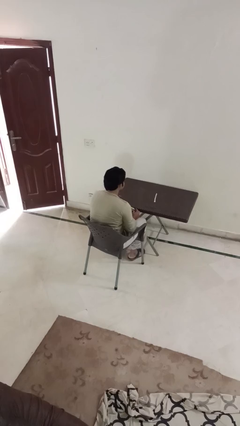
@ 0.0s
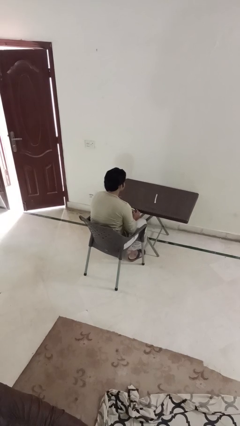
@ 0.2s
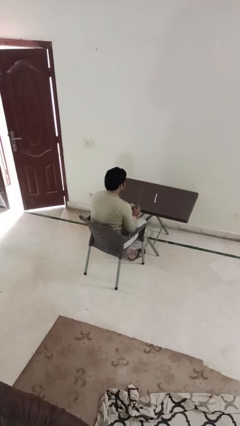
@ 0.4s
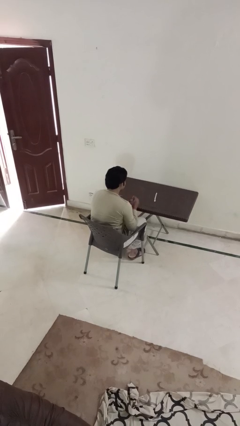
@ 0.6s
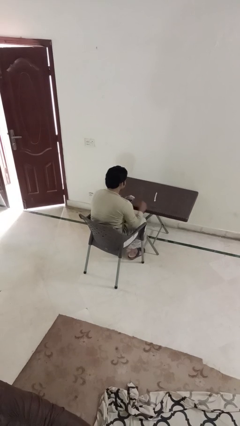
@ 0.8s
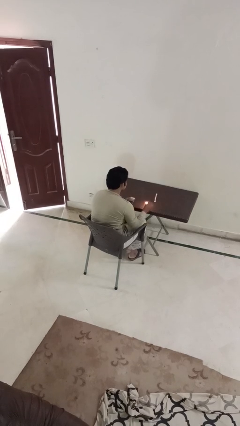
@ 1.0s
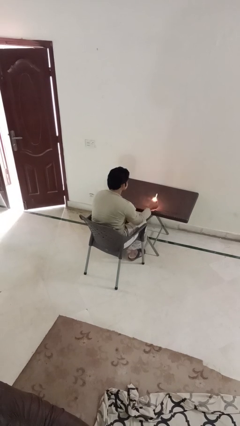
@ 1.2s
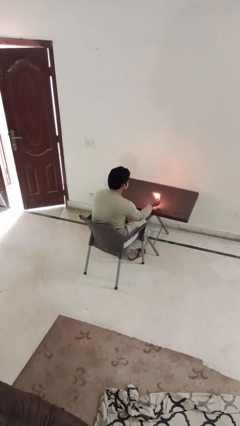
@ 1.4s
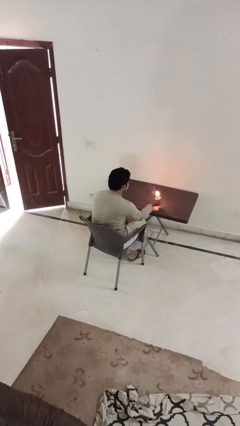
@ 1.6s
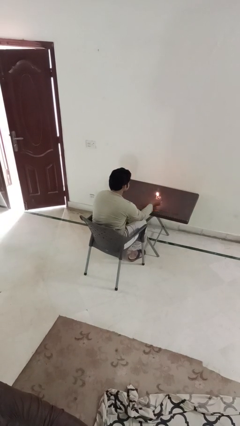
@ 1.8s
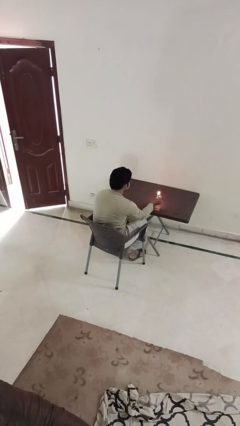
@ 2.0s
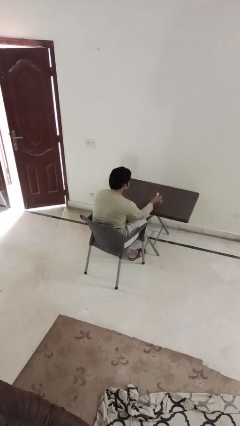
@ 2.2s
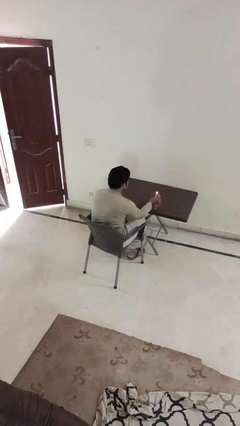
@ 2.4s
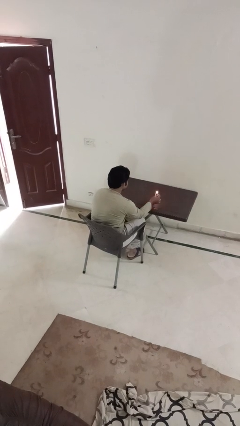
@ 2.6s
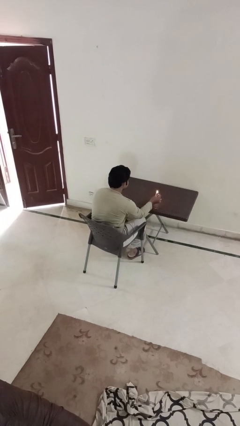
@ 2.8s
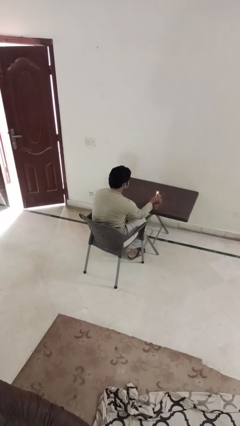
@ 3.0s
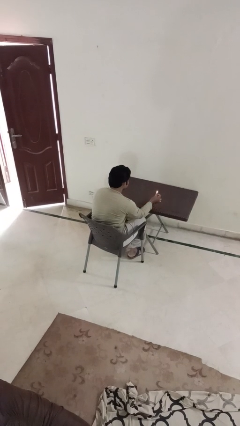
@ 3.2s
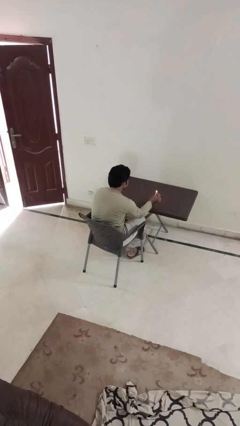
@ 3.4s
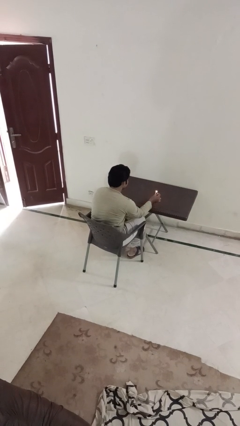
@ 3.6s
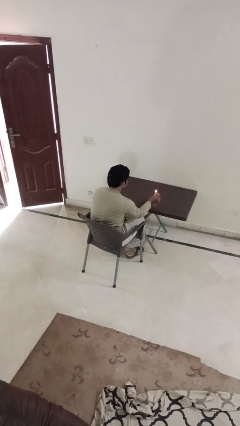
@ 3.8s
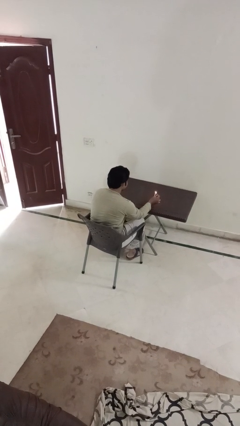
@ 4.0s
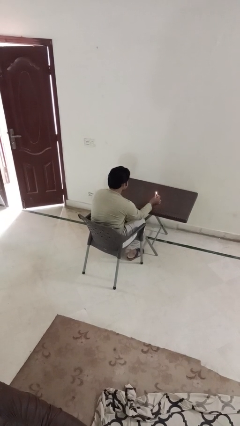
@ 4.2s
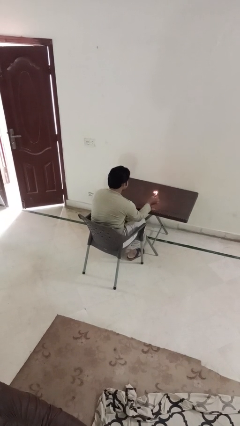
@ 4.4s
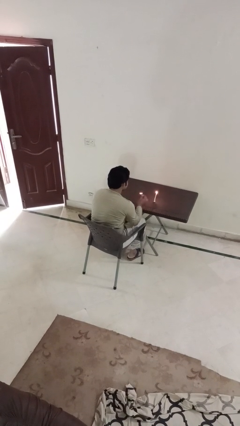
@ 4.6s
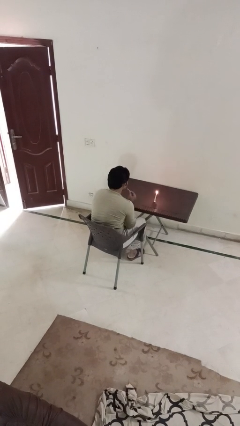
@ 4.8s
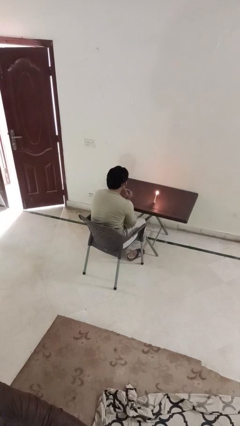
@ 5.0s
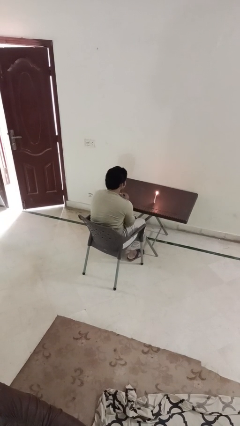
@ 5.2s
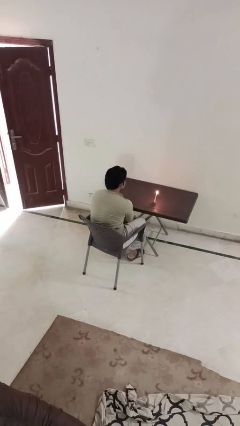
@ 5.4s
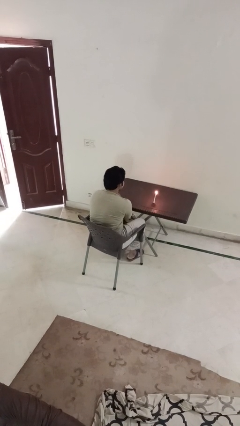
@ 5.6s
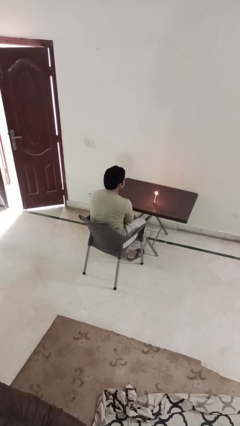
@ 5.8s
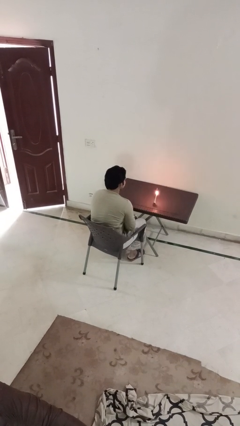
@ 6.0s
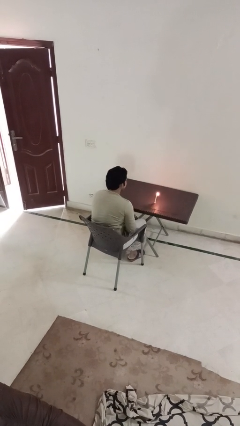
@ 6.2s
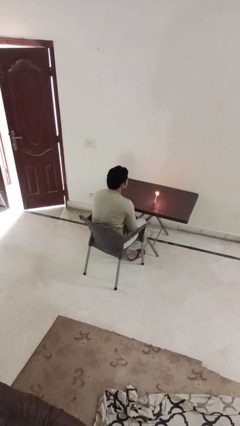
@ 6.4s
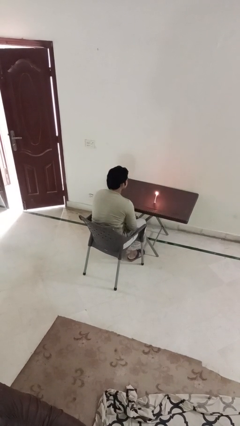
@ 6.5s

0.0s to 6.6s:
person lights candle

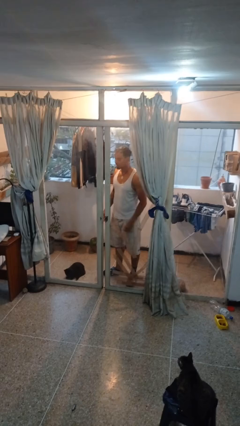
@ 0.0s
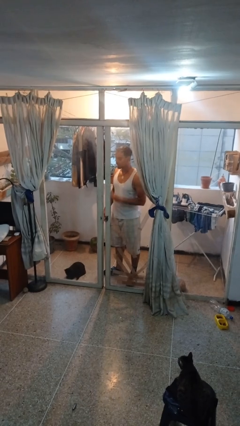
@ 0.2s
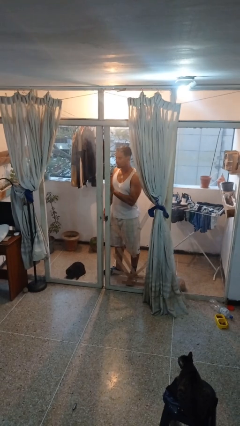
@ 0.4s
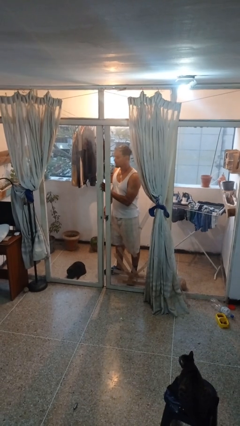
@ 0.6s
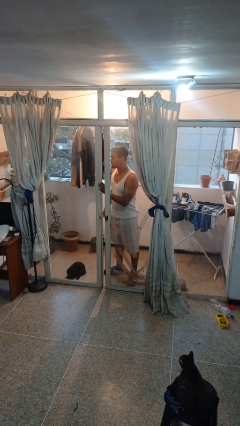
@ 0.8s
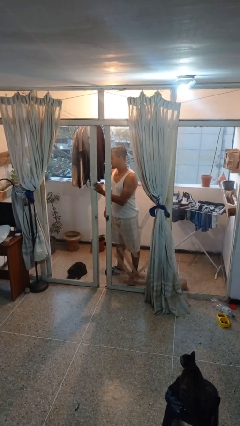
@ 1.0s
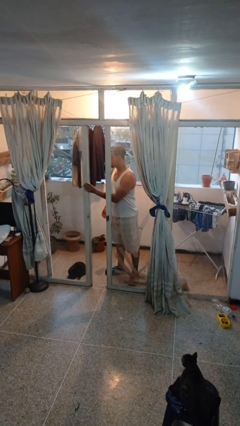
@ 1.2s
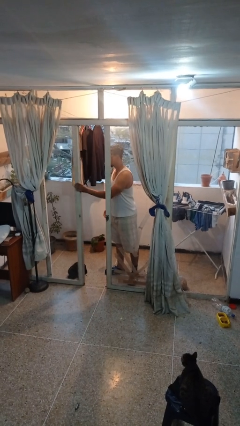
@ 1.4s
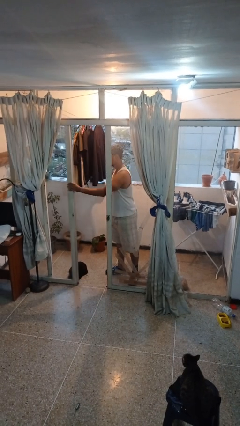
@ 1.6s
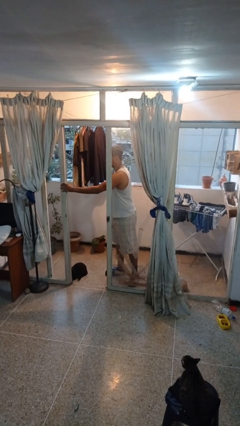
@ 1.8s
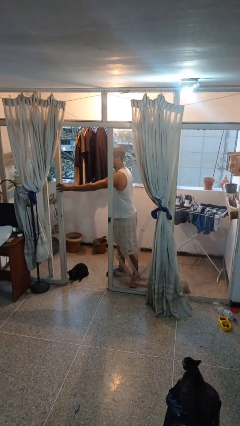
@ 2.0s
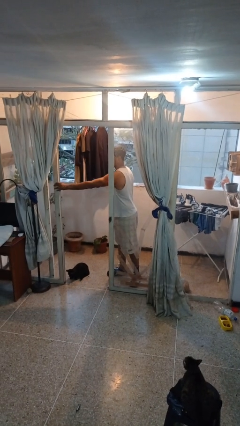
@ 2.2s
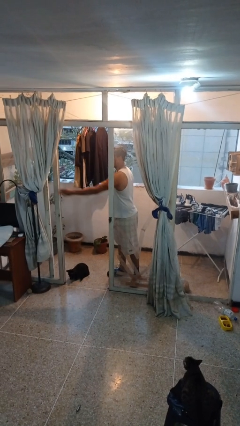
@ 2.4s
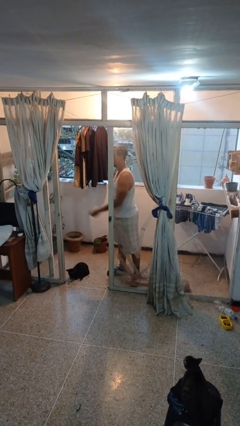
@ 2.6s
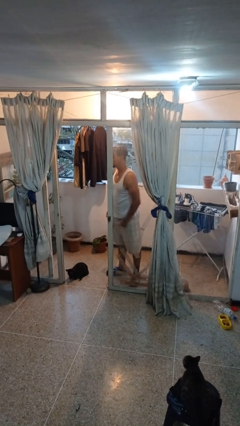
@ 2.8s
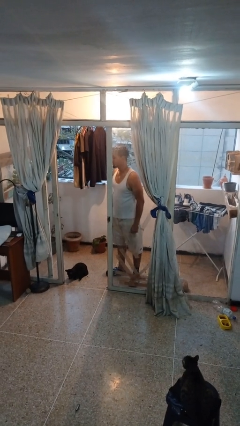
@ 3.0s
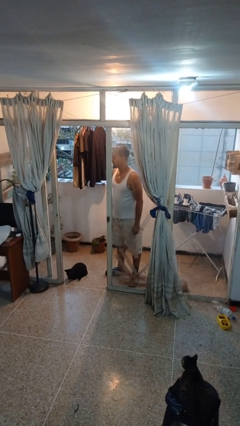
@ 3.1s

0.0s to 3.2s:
person opens sliding door

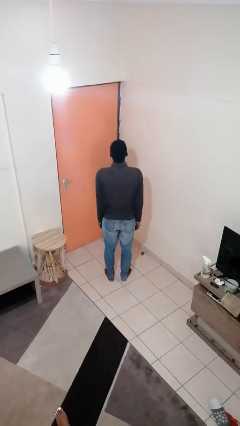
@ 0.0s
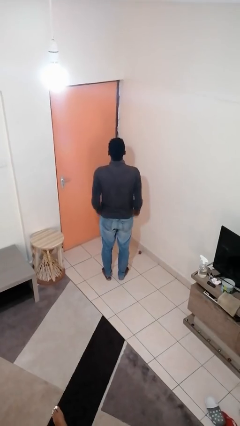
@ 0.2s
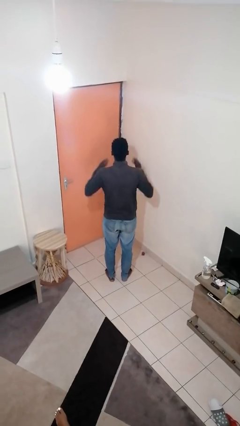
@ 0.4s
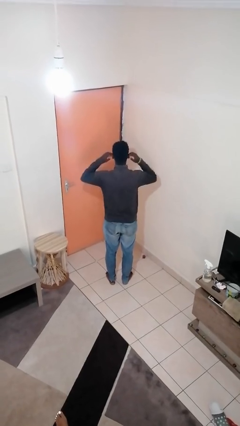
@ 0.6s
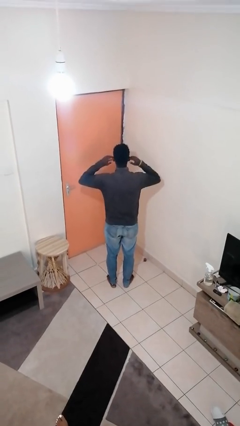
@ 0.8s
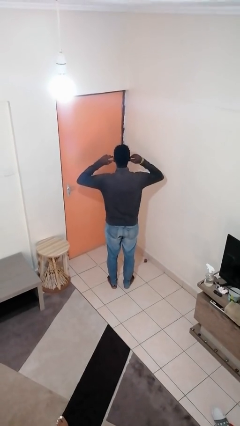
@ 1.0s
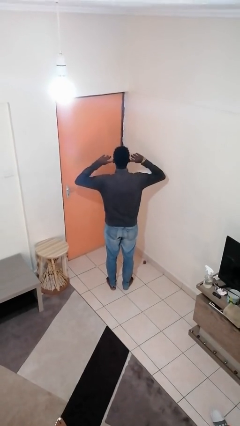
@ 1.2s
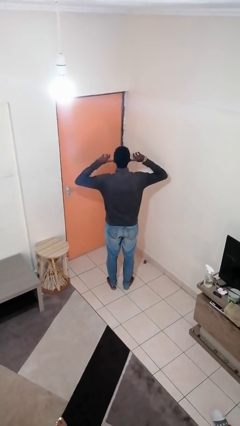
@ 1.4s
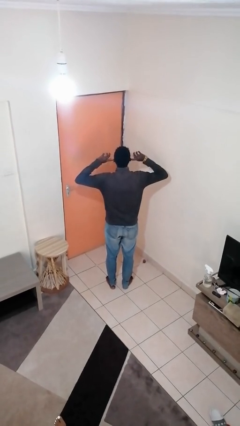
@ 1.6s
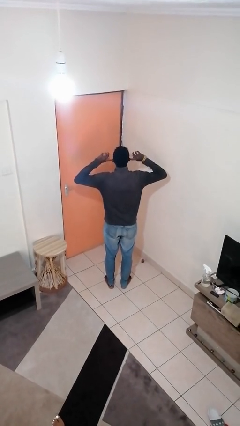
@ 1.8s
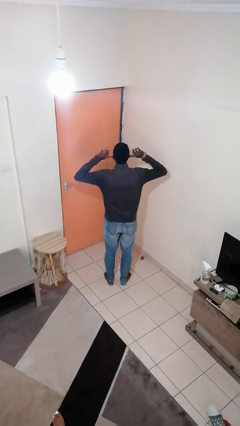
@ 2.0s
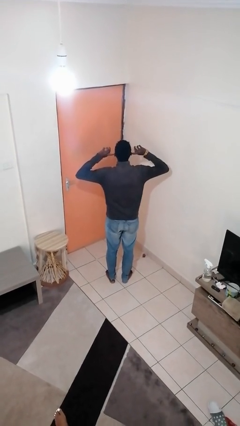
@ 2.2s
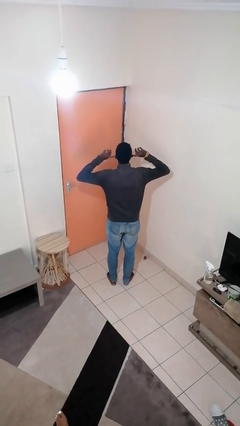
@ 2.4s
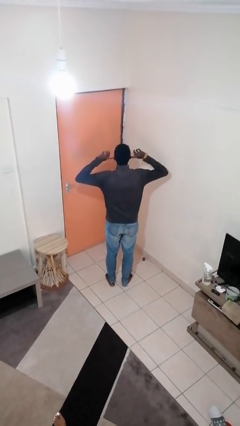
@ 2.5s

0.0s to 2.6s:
person puts fingers in ear

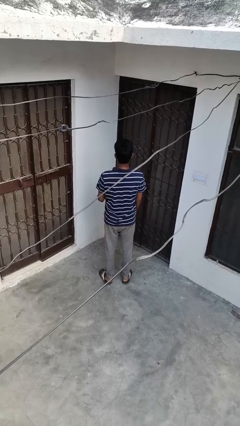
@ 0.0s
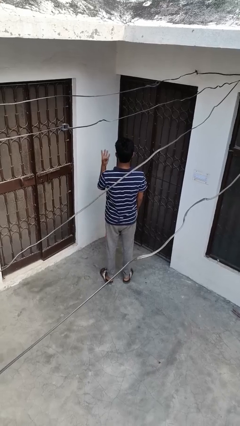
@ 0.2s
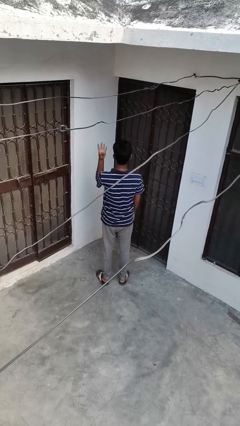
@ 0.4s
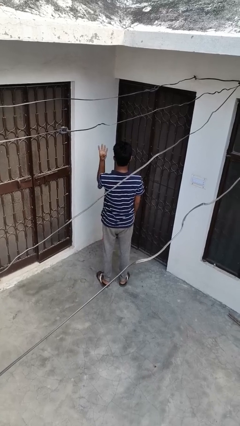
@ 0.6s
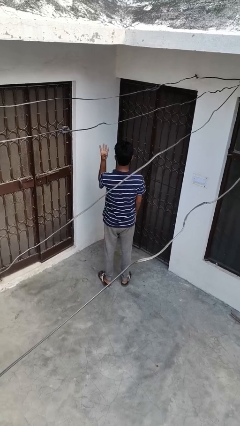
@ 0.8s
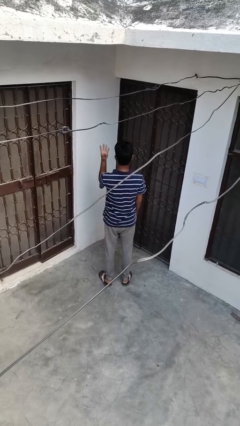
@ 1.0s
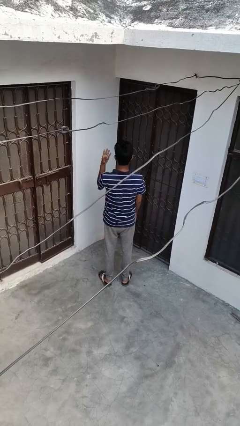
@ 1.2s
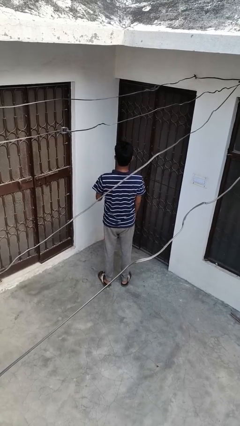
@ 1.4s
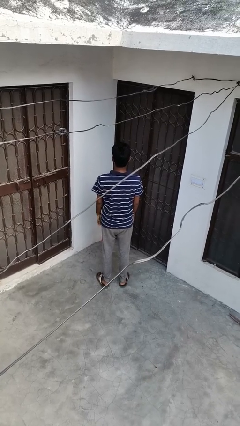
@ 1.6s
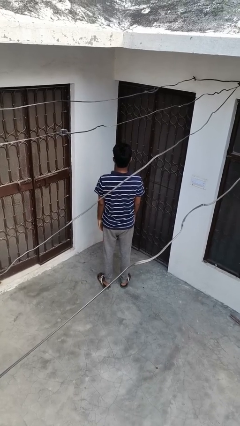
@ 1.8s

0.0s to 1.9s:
person gestures number four

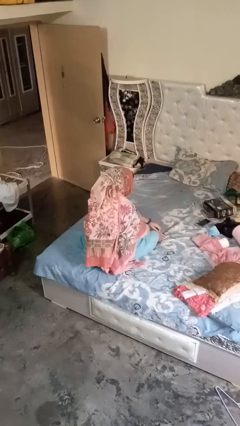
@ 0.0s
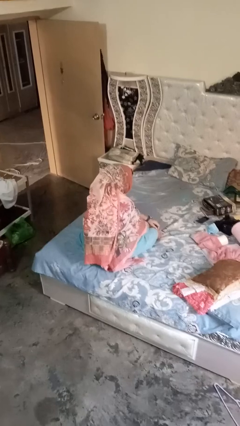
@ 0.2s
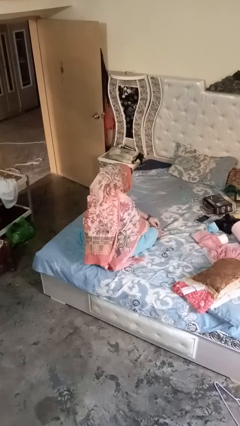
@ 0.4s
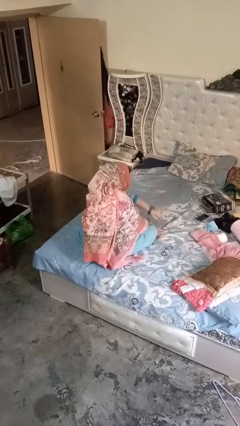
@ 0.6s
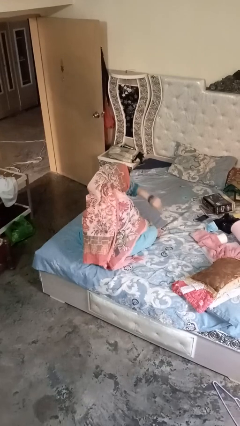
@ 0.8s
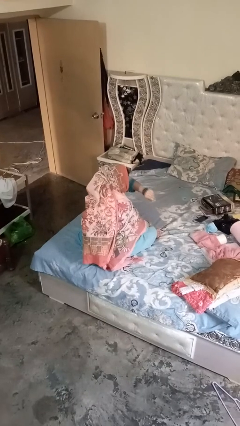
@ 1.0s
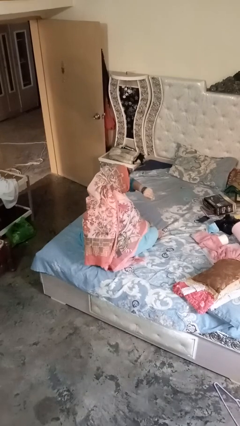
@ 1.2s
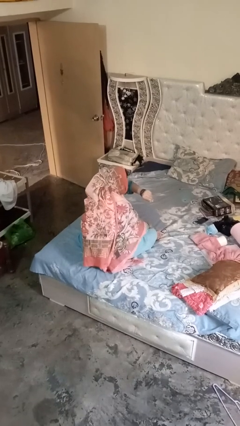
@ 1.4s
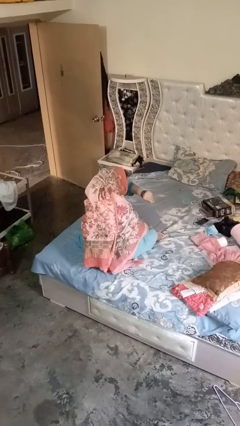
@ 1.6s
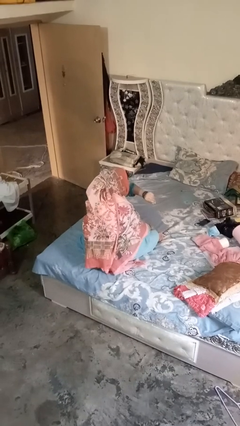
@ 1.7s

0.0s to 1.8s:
person gestures watch closely

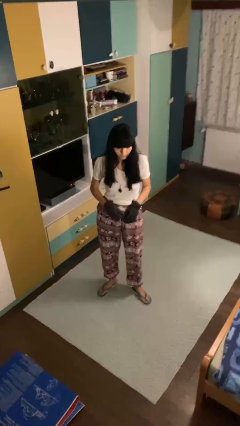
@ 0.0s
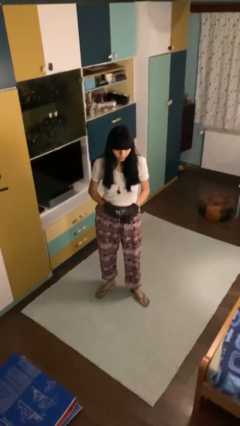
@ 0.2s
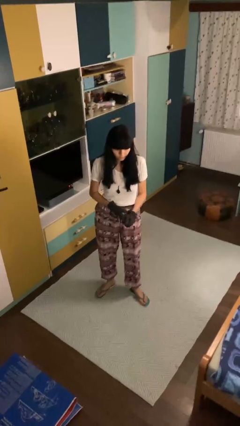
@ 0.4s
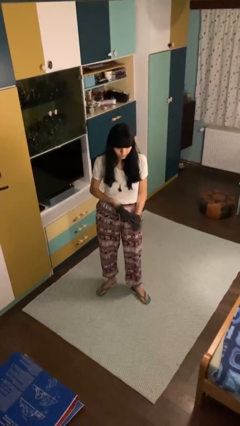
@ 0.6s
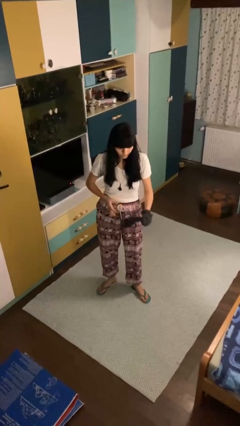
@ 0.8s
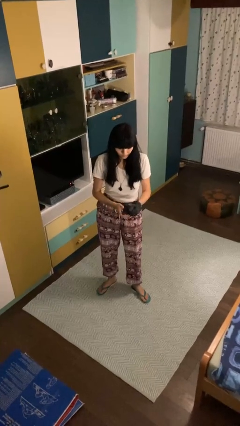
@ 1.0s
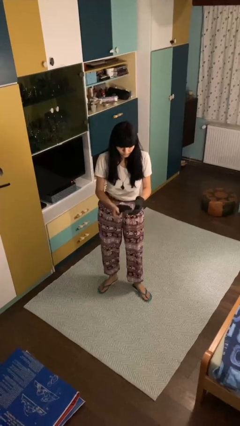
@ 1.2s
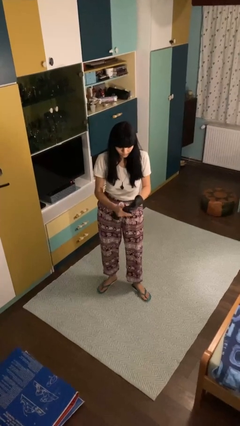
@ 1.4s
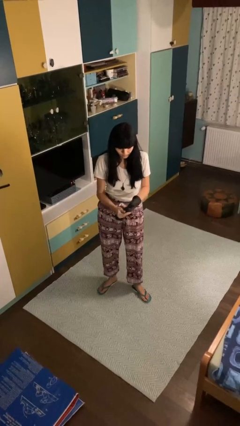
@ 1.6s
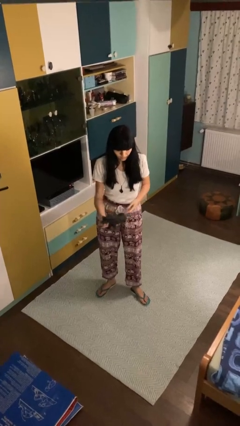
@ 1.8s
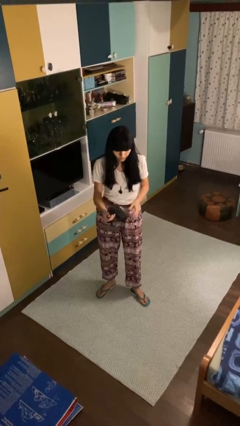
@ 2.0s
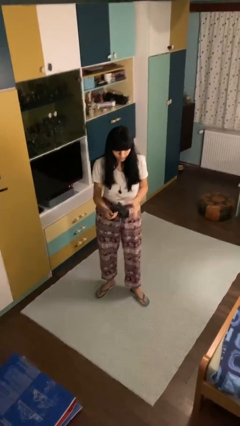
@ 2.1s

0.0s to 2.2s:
person takes off gloves
